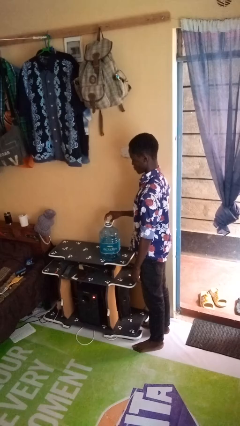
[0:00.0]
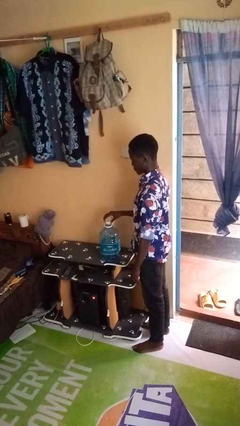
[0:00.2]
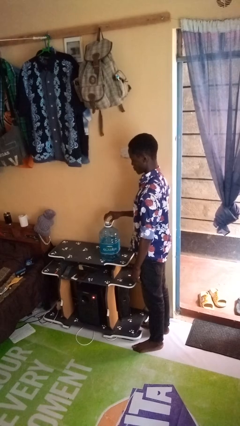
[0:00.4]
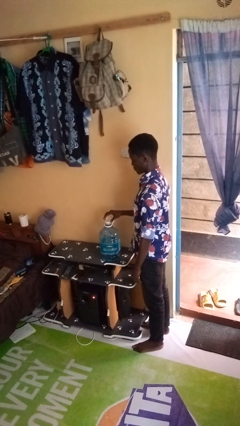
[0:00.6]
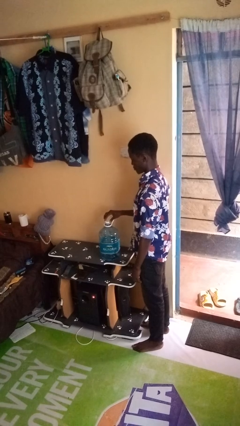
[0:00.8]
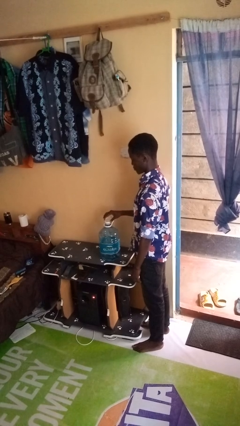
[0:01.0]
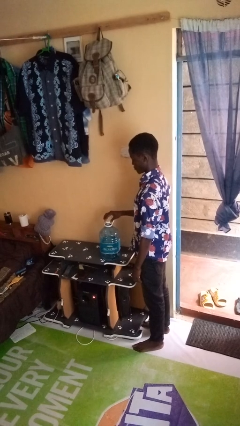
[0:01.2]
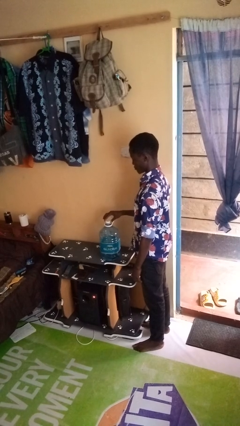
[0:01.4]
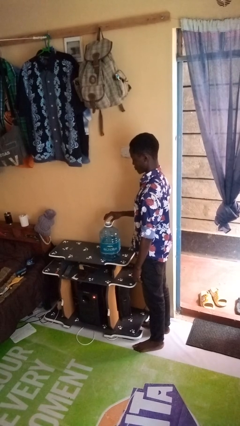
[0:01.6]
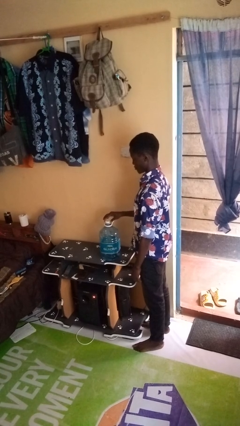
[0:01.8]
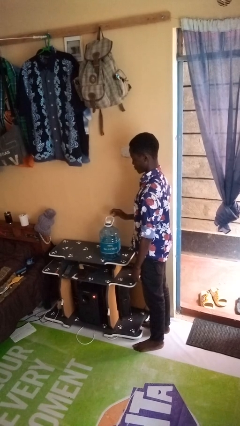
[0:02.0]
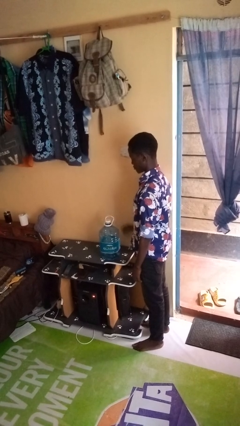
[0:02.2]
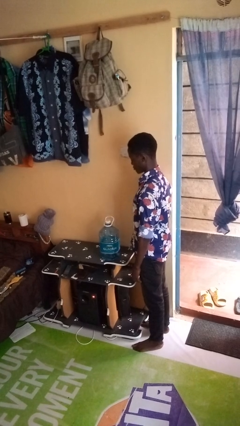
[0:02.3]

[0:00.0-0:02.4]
person screws lid to bottle

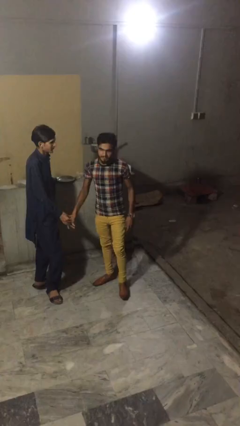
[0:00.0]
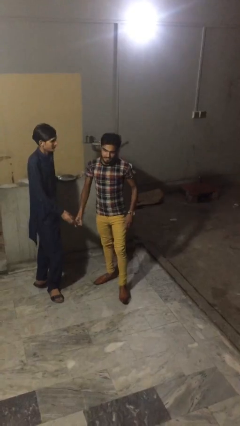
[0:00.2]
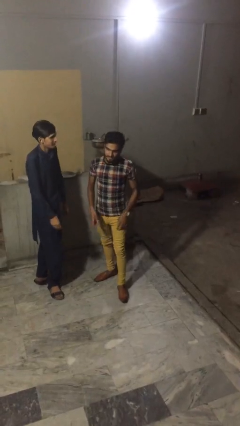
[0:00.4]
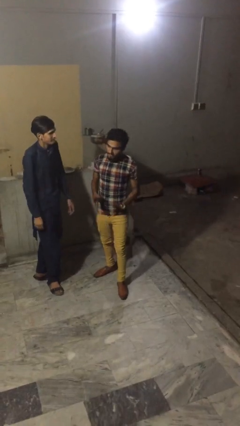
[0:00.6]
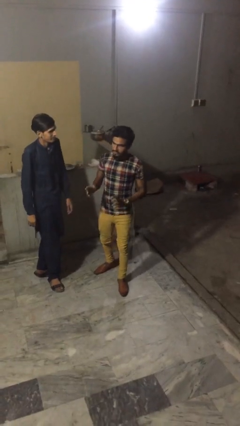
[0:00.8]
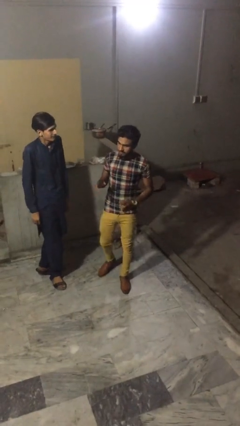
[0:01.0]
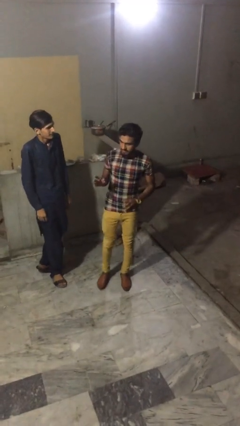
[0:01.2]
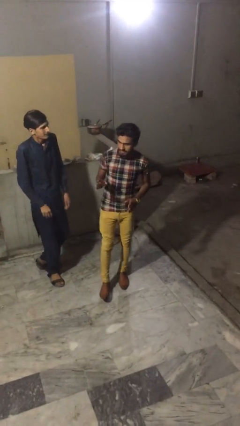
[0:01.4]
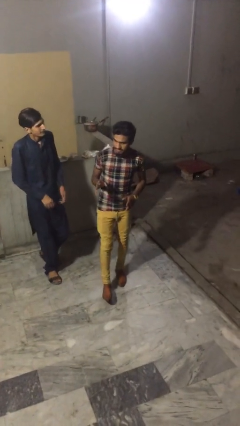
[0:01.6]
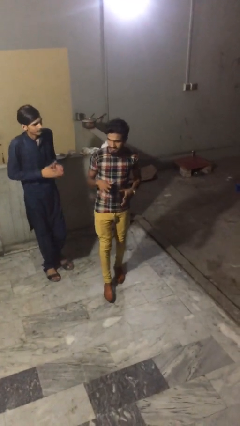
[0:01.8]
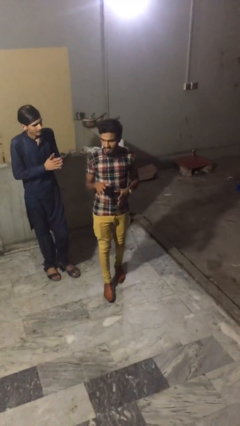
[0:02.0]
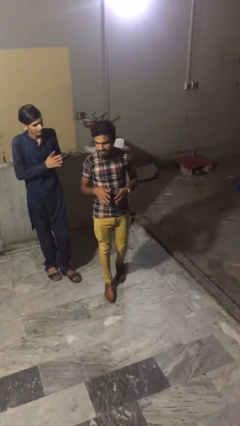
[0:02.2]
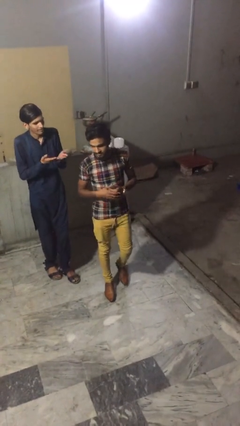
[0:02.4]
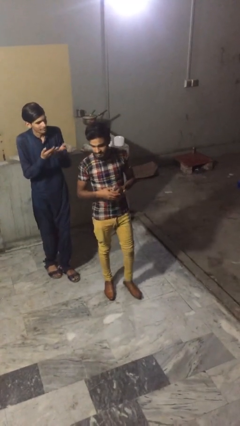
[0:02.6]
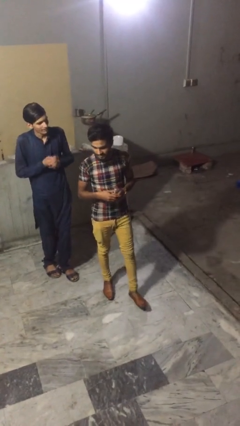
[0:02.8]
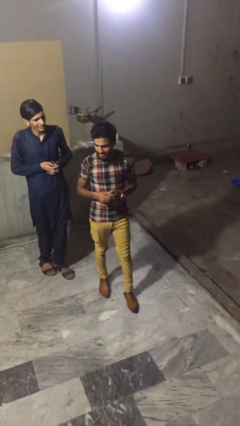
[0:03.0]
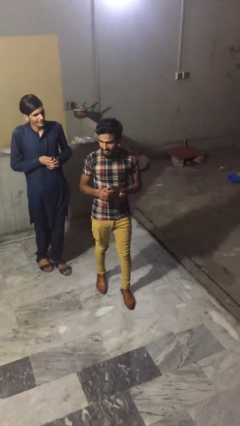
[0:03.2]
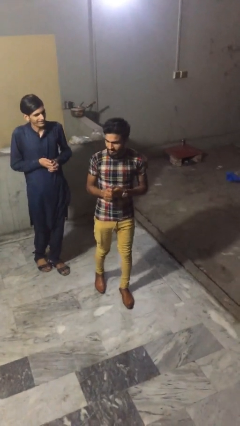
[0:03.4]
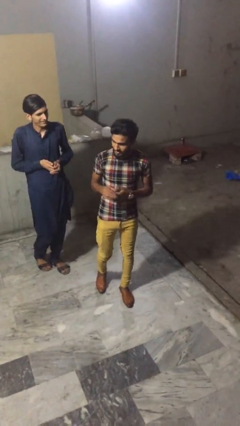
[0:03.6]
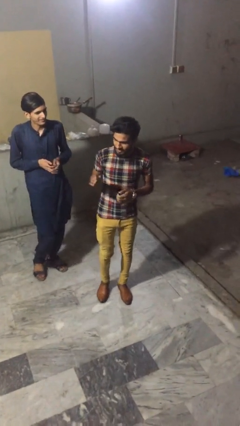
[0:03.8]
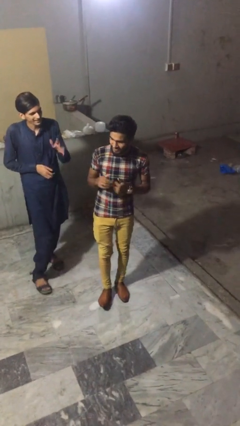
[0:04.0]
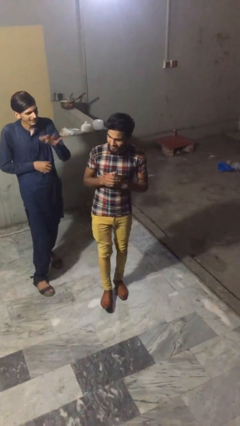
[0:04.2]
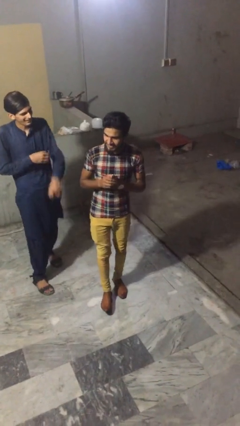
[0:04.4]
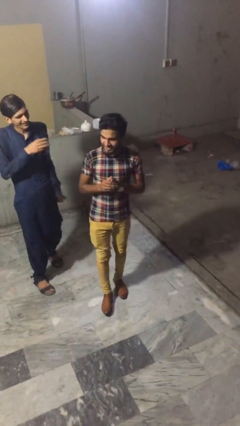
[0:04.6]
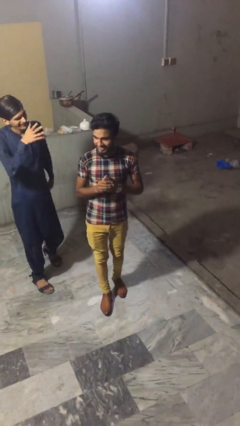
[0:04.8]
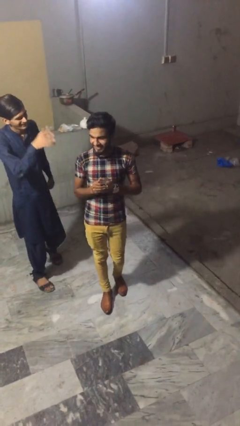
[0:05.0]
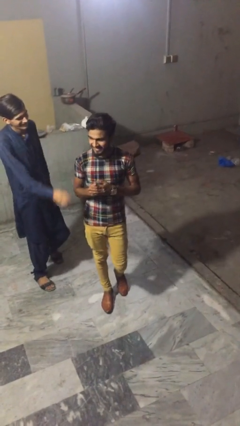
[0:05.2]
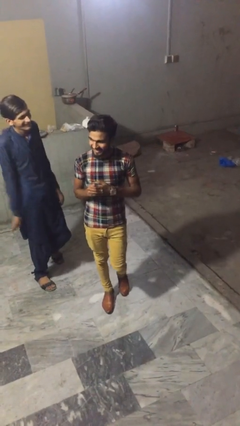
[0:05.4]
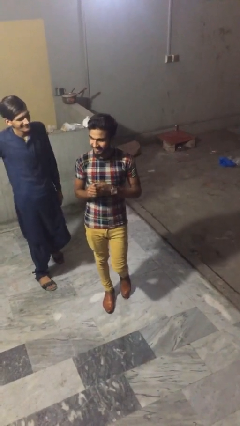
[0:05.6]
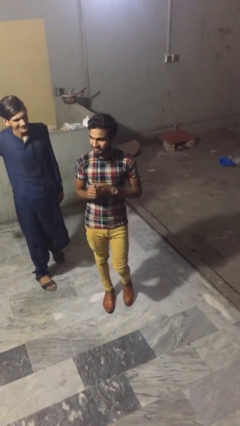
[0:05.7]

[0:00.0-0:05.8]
person talks to person

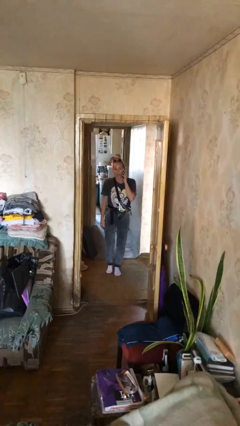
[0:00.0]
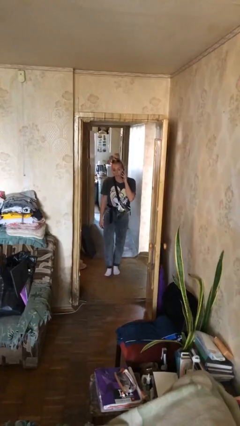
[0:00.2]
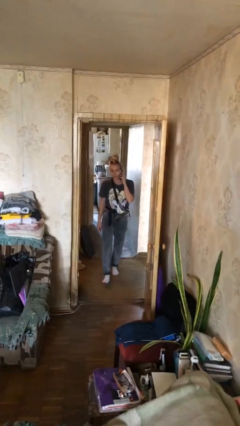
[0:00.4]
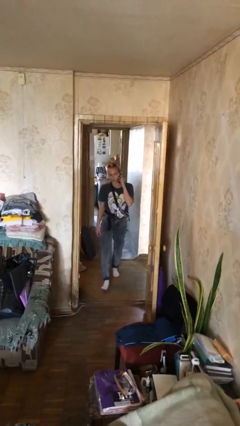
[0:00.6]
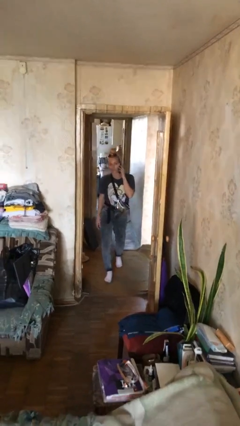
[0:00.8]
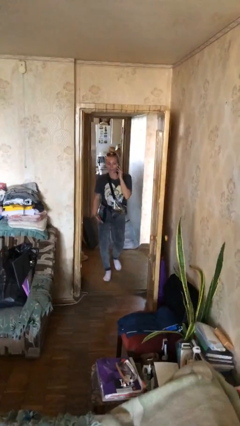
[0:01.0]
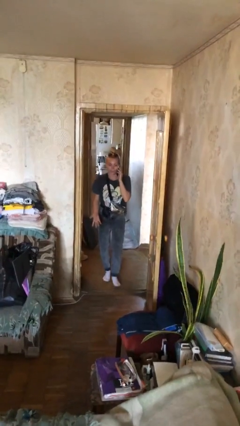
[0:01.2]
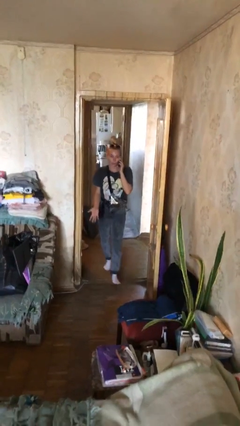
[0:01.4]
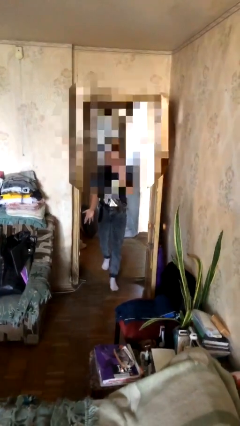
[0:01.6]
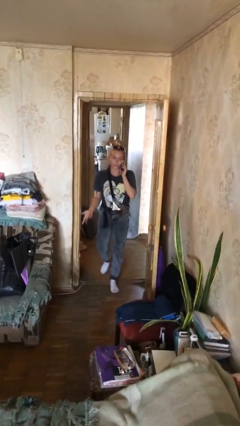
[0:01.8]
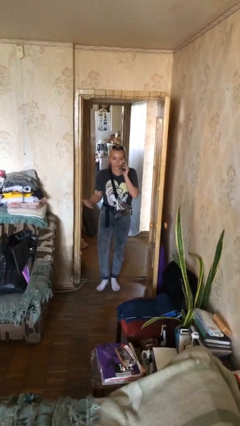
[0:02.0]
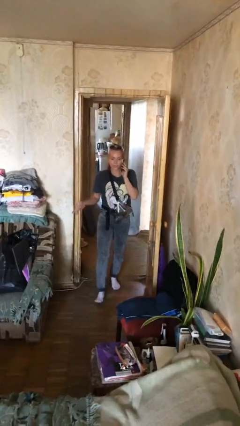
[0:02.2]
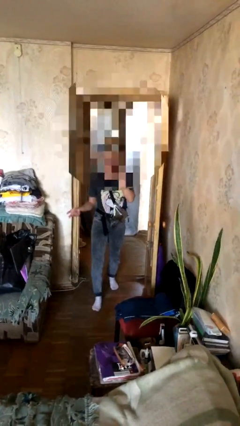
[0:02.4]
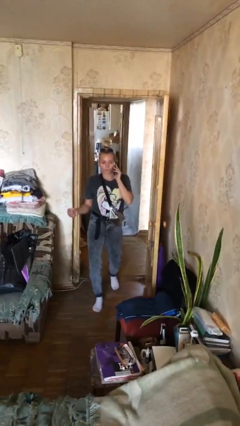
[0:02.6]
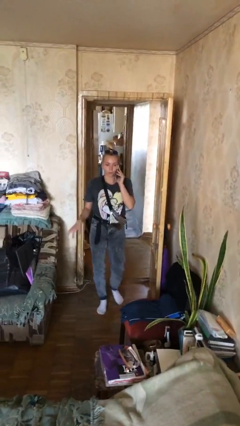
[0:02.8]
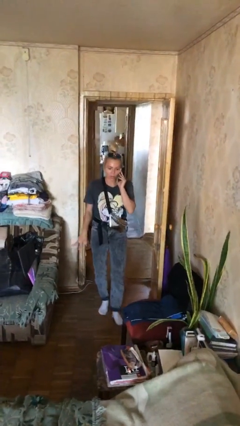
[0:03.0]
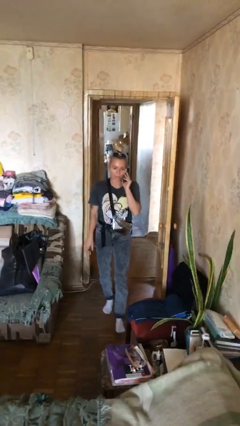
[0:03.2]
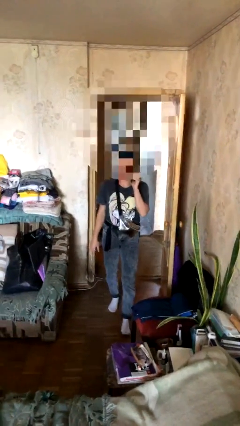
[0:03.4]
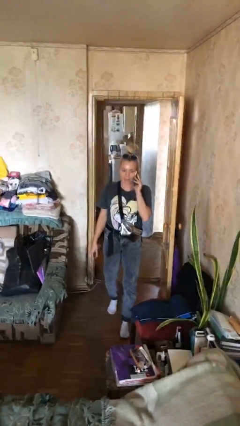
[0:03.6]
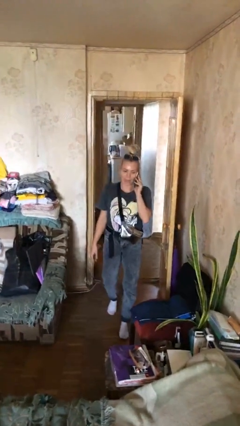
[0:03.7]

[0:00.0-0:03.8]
person enters scene through structure

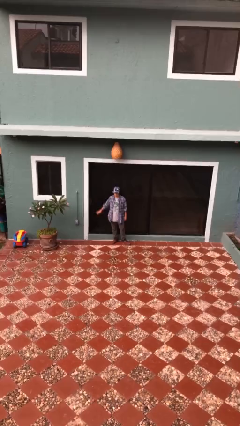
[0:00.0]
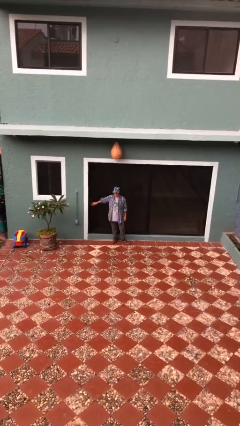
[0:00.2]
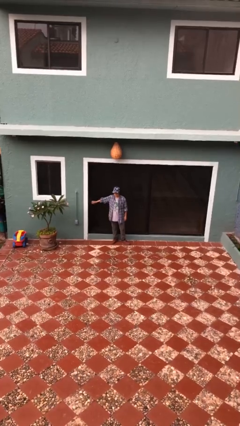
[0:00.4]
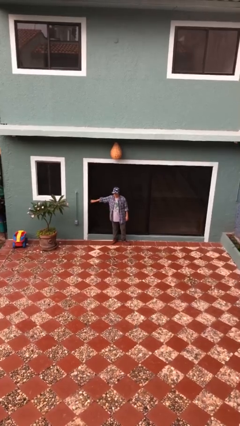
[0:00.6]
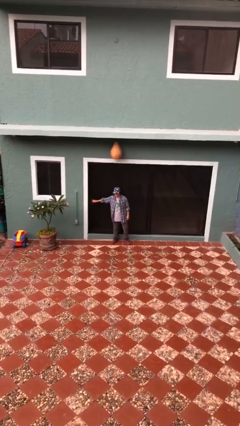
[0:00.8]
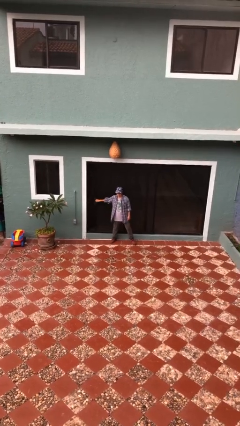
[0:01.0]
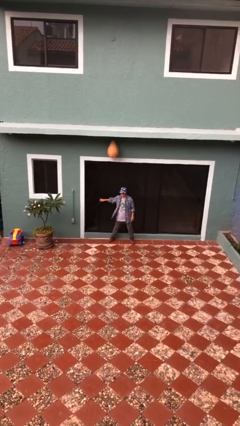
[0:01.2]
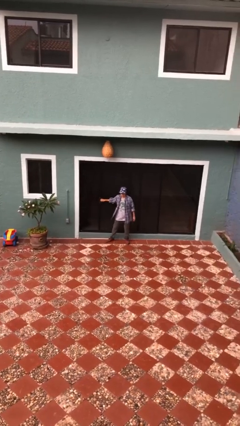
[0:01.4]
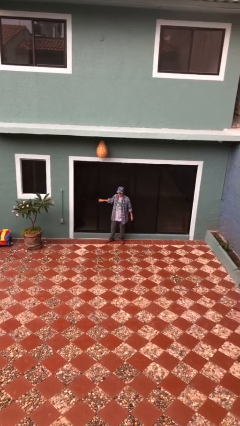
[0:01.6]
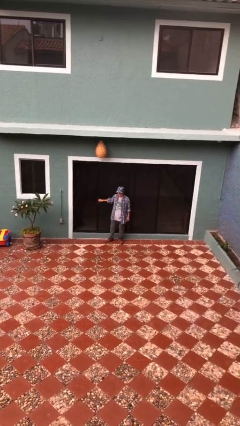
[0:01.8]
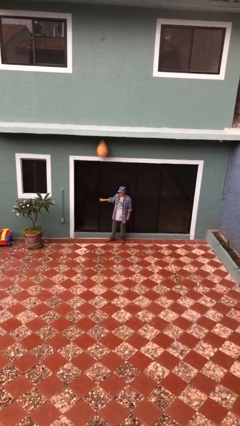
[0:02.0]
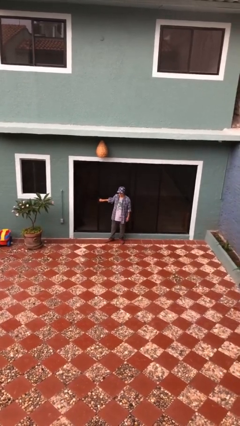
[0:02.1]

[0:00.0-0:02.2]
person opens sliding door

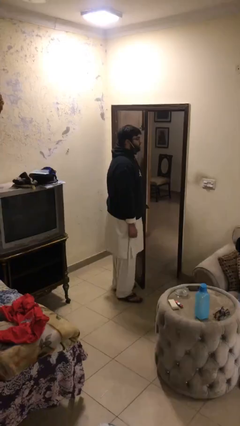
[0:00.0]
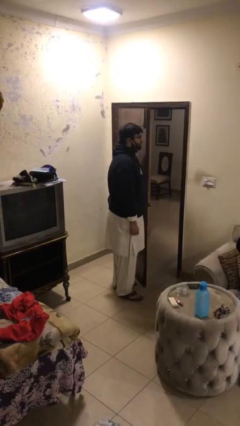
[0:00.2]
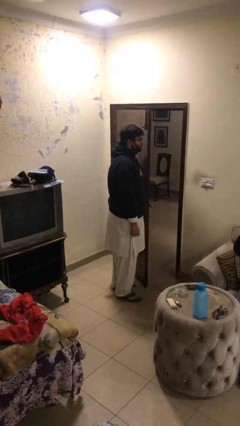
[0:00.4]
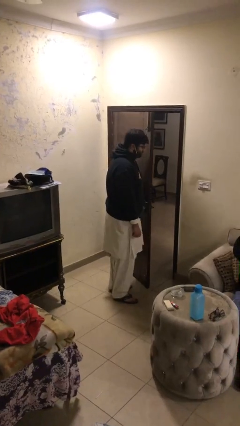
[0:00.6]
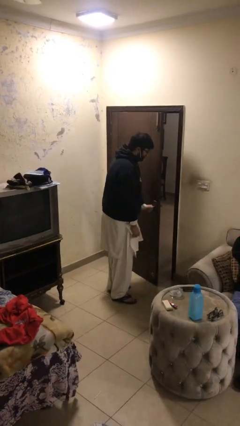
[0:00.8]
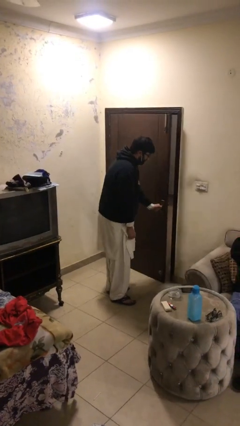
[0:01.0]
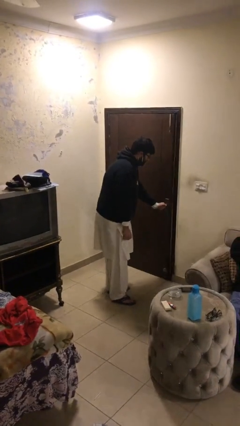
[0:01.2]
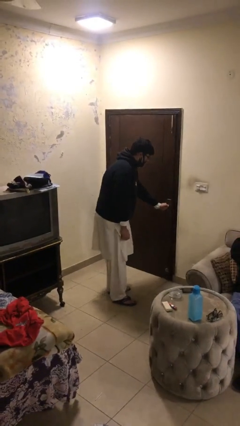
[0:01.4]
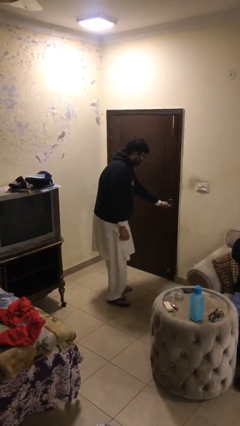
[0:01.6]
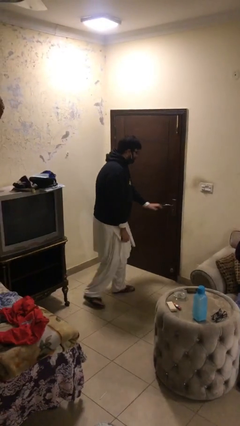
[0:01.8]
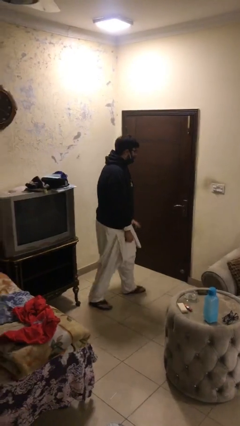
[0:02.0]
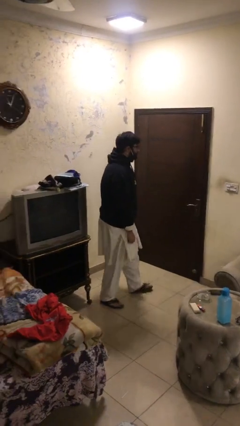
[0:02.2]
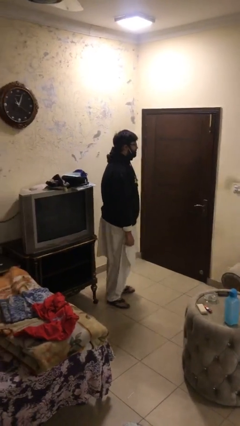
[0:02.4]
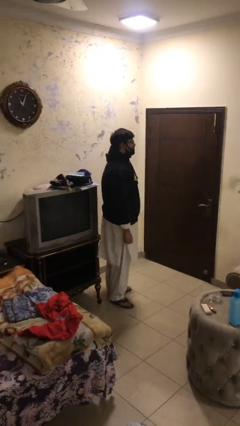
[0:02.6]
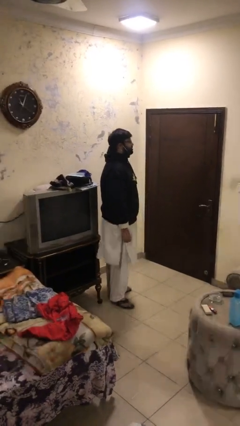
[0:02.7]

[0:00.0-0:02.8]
person closes facility door

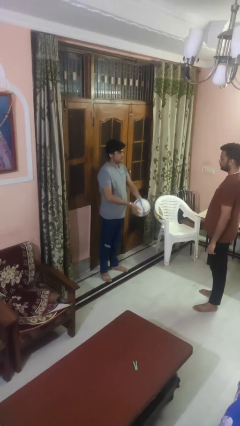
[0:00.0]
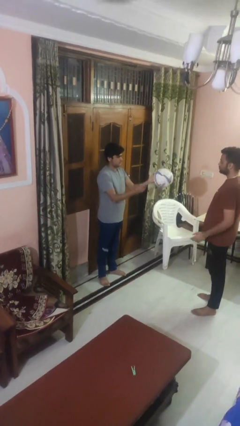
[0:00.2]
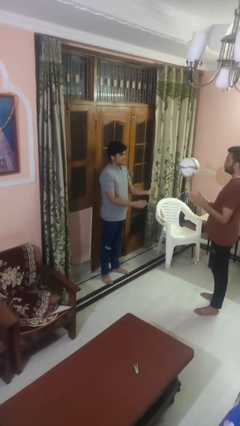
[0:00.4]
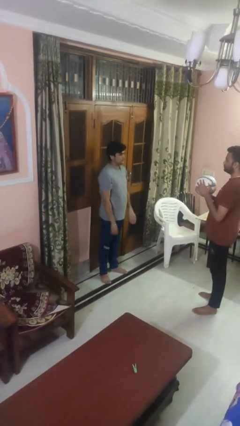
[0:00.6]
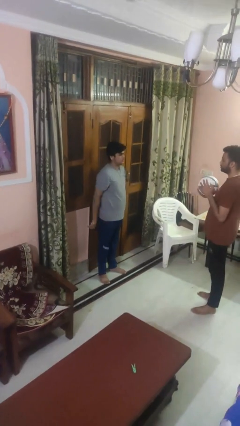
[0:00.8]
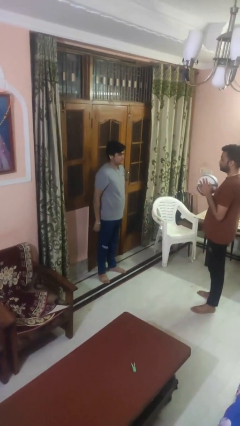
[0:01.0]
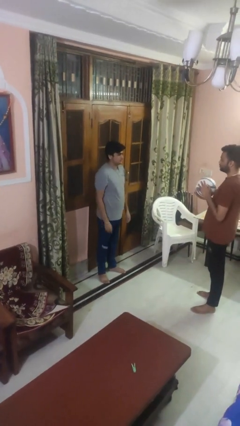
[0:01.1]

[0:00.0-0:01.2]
person throws object to person
